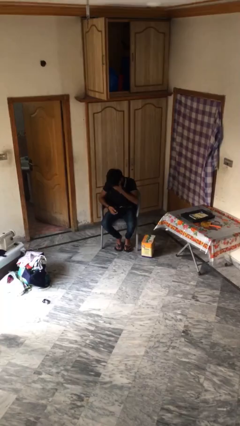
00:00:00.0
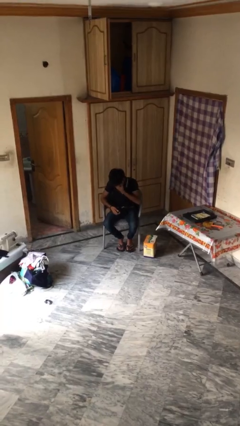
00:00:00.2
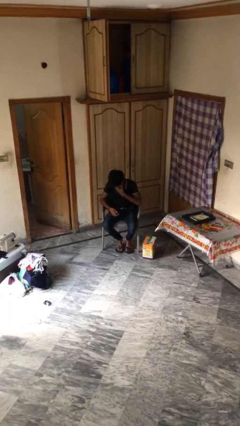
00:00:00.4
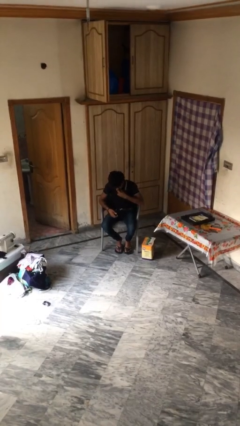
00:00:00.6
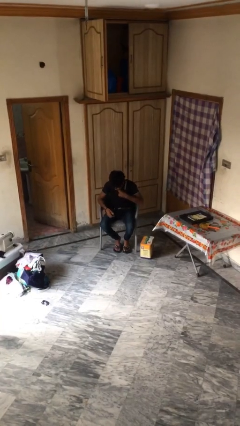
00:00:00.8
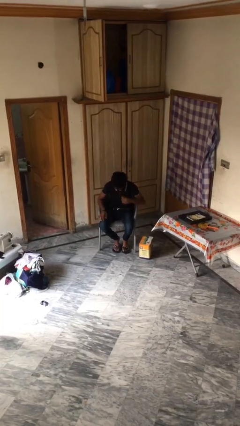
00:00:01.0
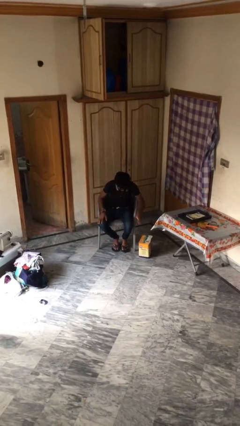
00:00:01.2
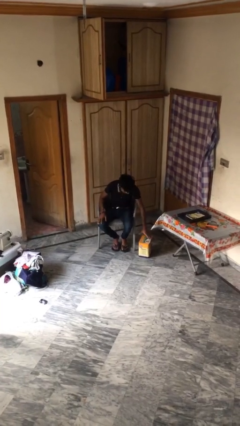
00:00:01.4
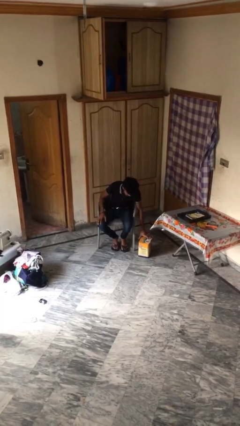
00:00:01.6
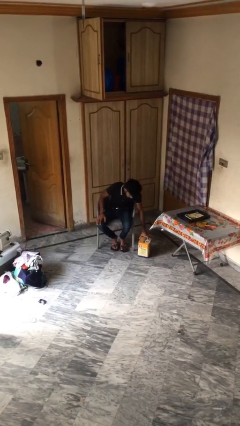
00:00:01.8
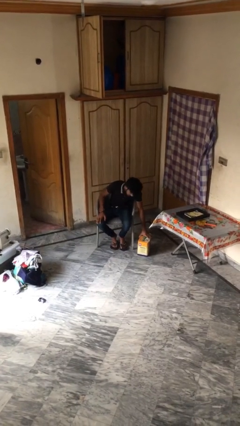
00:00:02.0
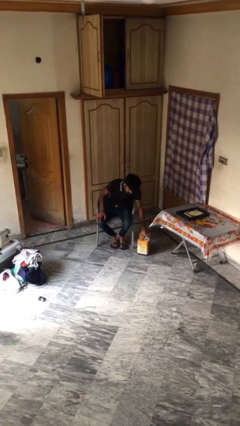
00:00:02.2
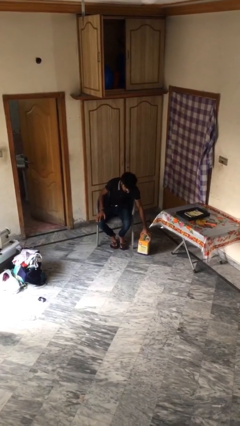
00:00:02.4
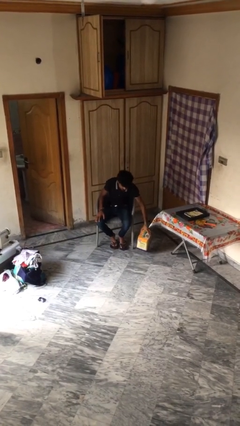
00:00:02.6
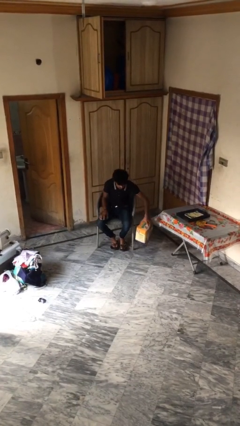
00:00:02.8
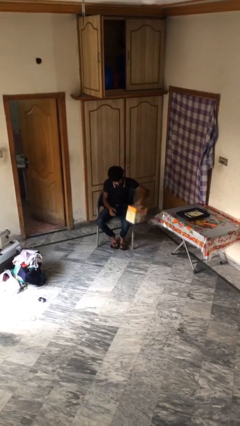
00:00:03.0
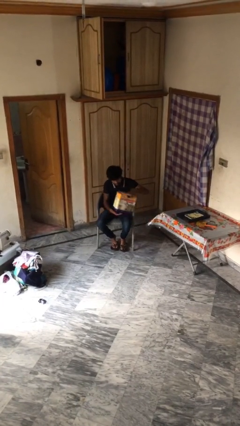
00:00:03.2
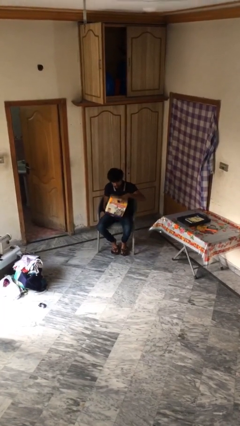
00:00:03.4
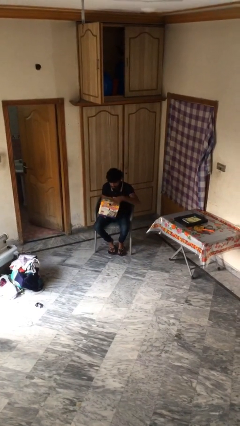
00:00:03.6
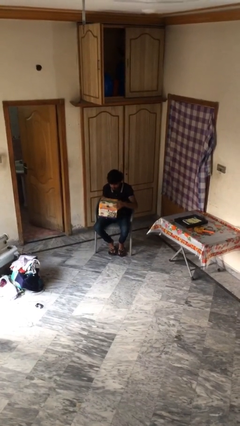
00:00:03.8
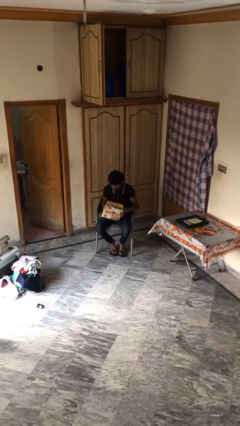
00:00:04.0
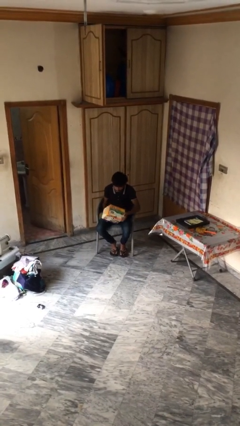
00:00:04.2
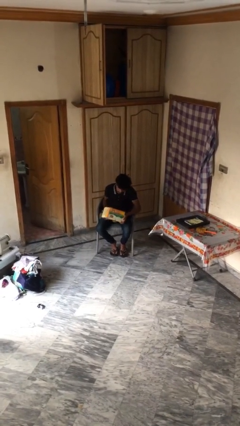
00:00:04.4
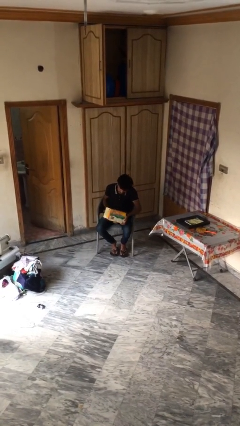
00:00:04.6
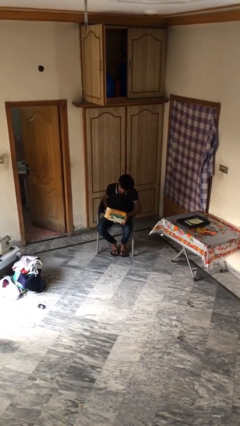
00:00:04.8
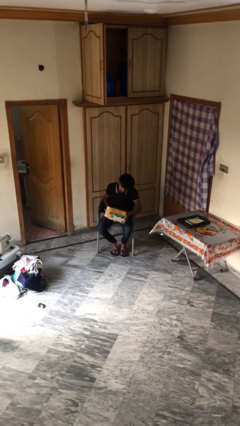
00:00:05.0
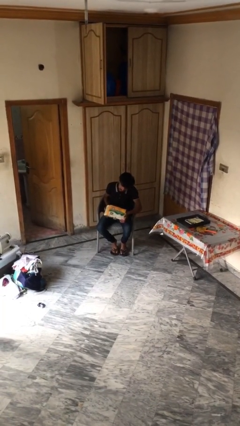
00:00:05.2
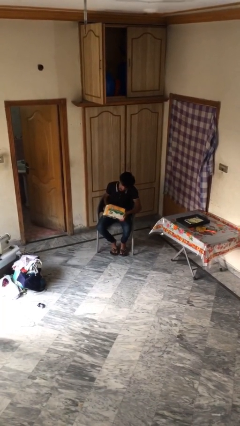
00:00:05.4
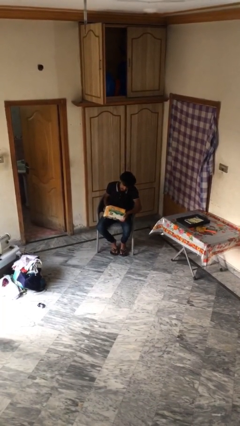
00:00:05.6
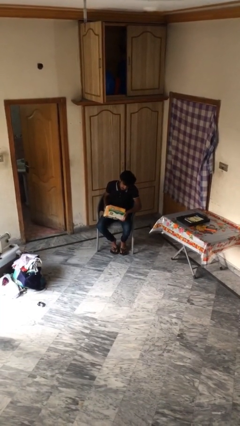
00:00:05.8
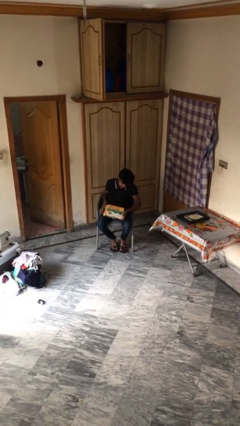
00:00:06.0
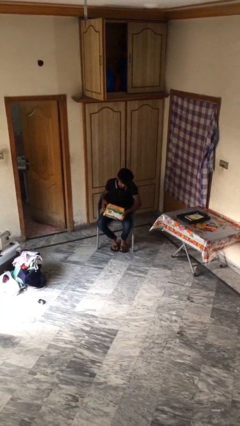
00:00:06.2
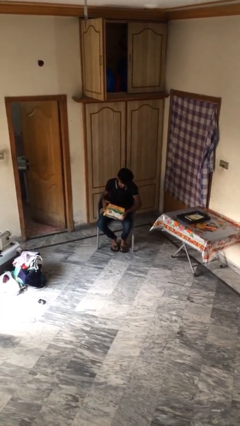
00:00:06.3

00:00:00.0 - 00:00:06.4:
person picks up object from floor

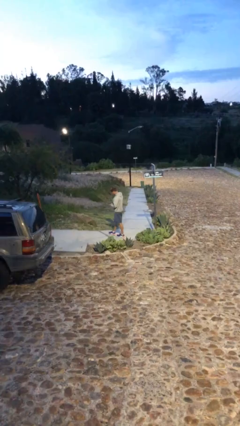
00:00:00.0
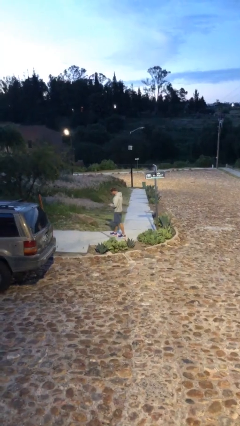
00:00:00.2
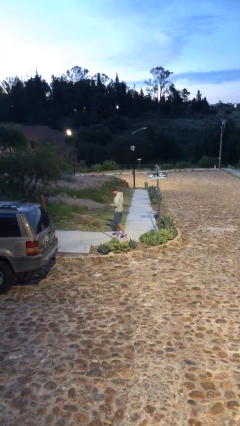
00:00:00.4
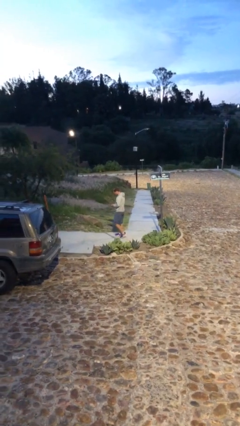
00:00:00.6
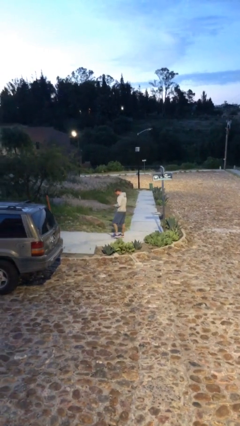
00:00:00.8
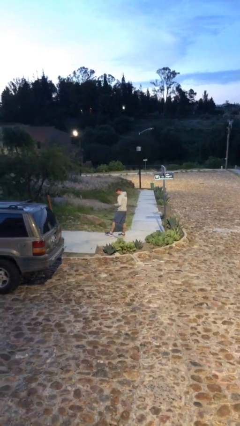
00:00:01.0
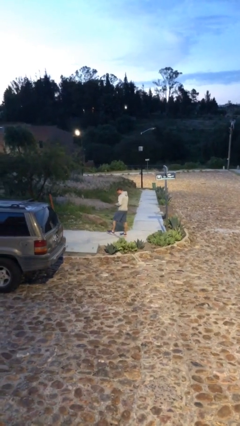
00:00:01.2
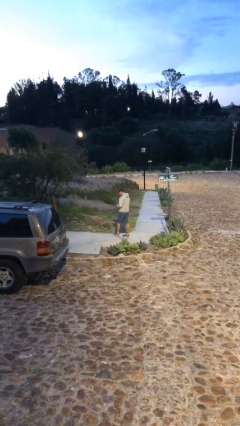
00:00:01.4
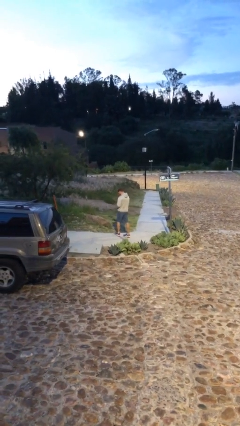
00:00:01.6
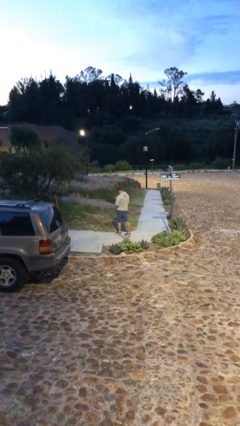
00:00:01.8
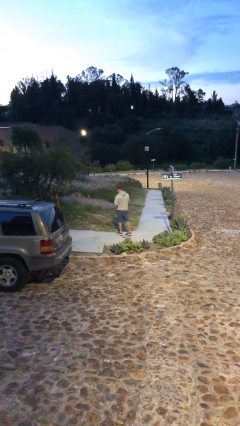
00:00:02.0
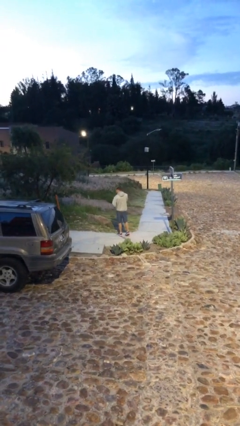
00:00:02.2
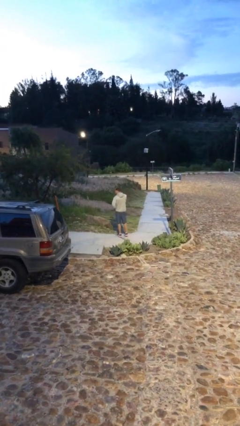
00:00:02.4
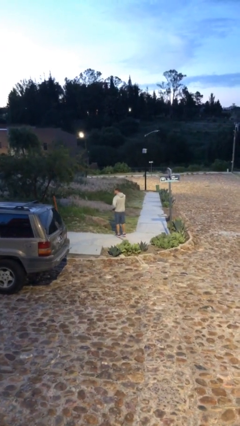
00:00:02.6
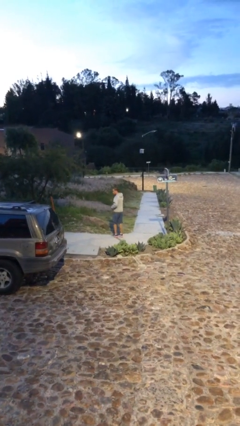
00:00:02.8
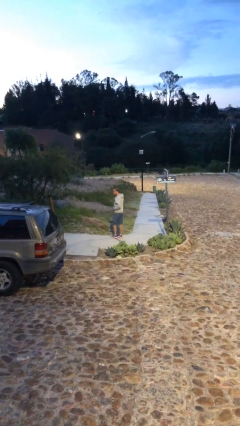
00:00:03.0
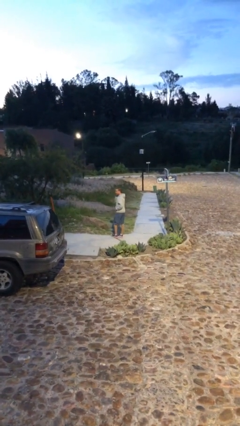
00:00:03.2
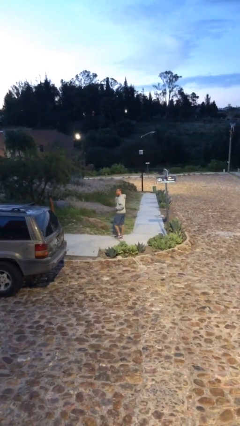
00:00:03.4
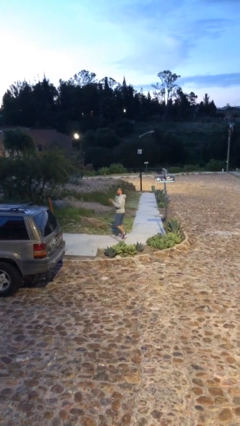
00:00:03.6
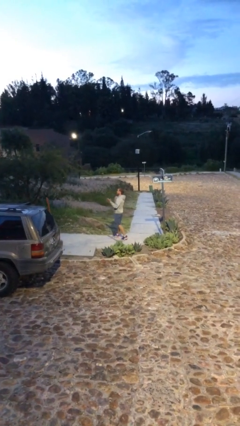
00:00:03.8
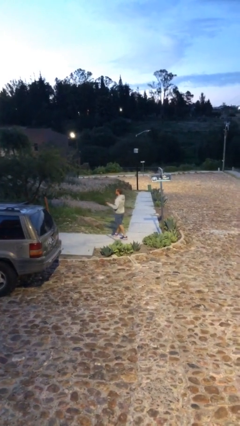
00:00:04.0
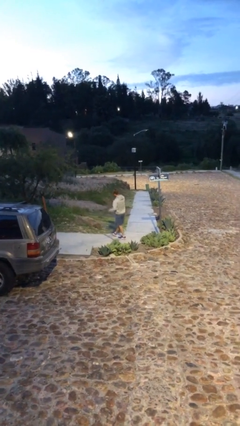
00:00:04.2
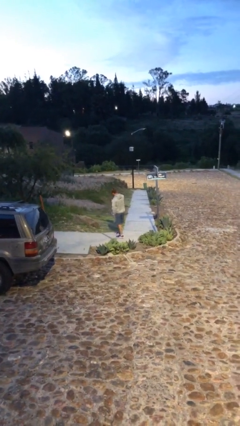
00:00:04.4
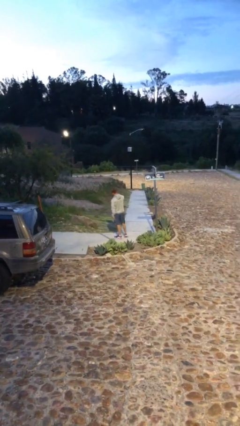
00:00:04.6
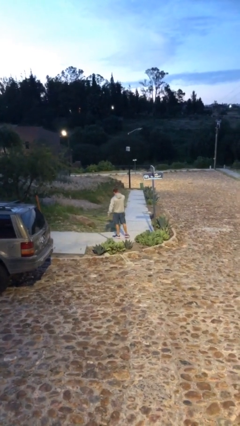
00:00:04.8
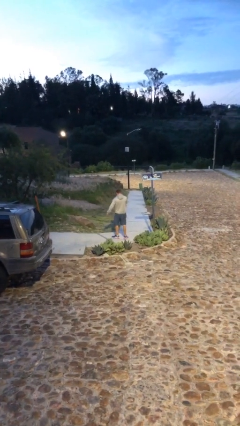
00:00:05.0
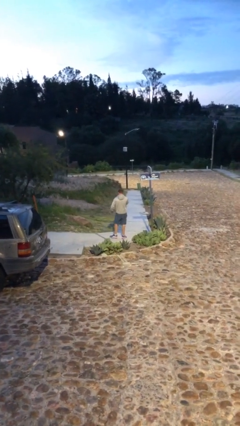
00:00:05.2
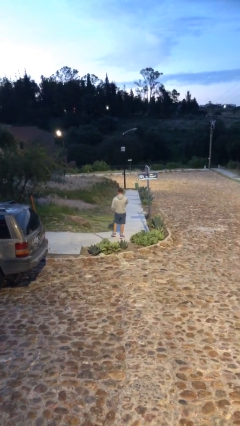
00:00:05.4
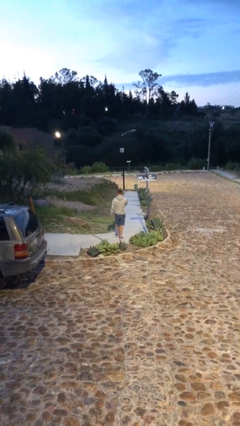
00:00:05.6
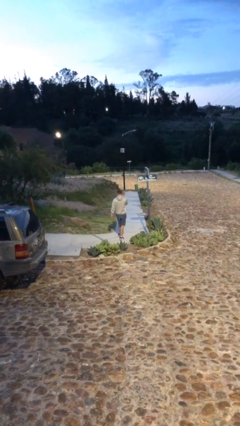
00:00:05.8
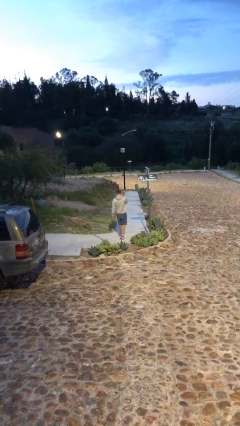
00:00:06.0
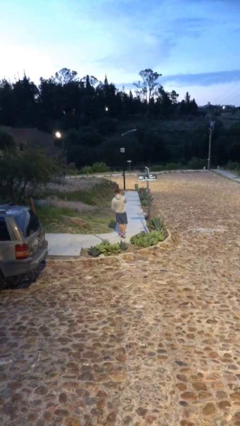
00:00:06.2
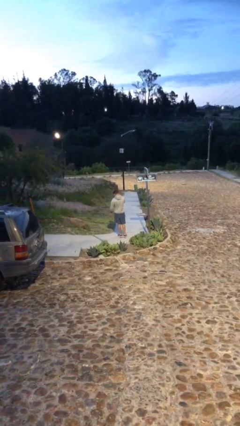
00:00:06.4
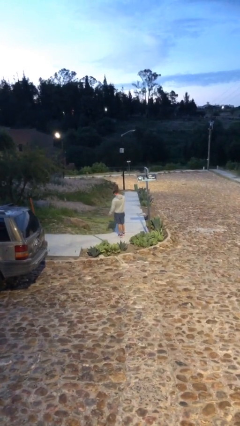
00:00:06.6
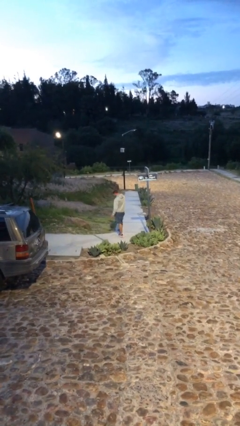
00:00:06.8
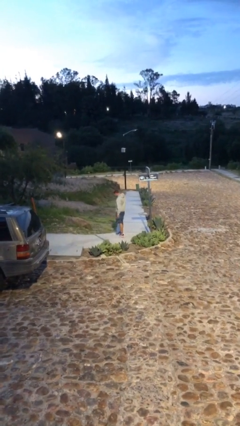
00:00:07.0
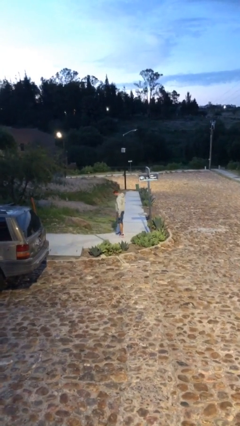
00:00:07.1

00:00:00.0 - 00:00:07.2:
person talks on phone

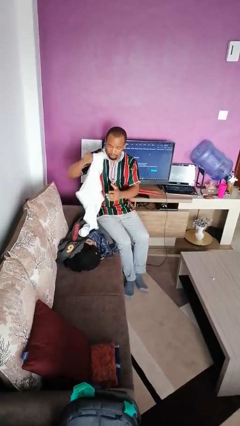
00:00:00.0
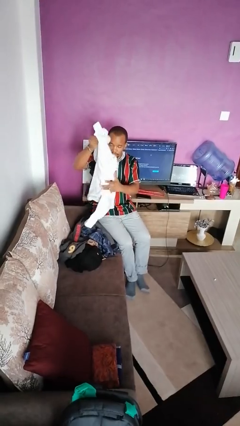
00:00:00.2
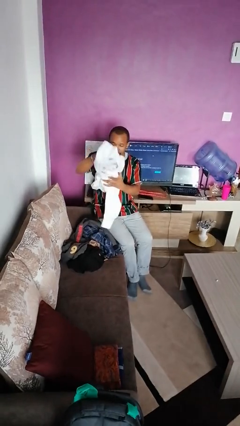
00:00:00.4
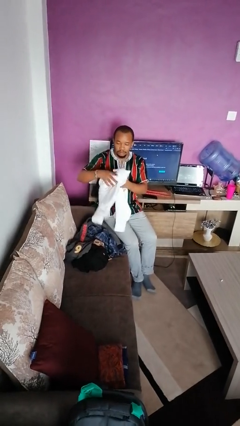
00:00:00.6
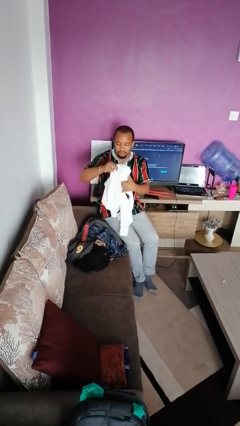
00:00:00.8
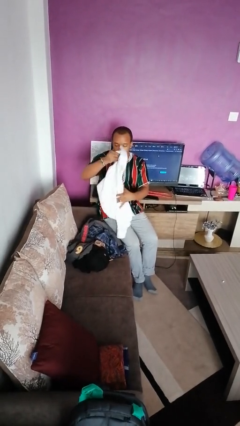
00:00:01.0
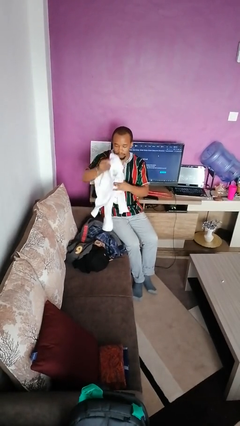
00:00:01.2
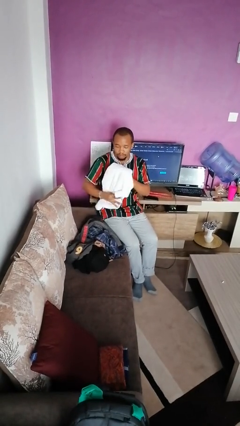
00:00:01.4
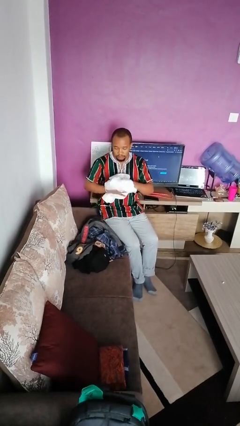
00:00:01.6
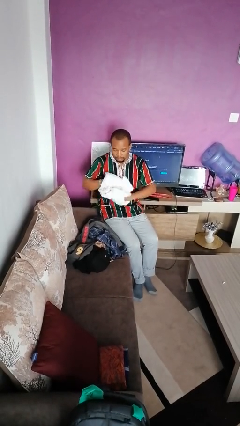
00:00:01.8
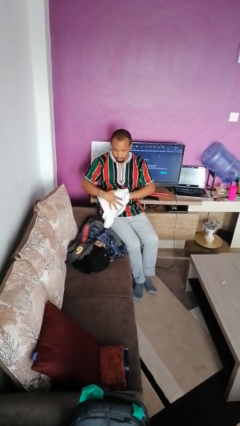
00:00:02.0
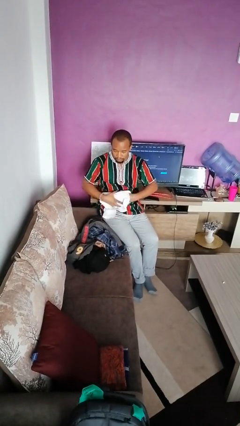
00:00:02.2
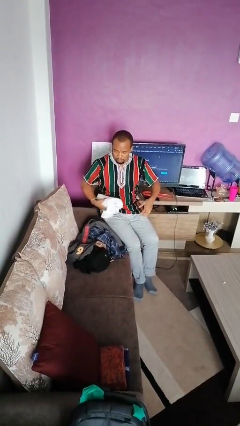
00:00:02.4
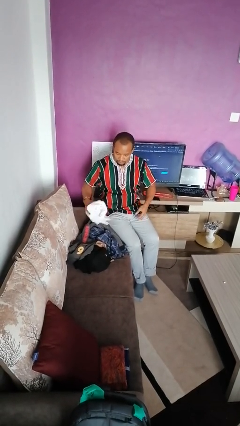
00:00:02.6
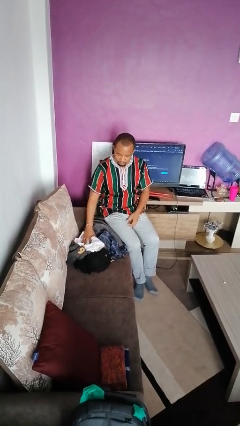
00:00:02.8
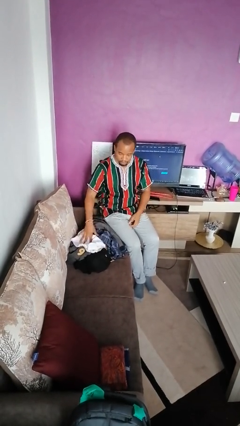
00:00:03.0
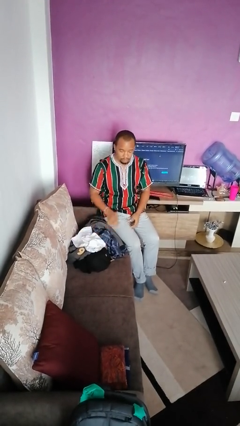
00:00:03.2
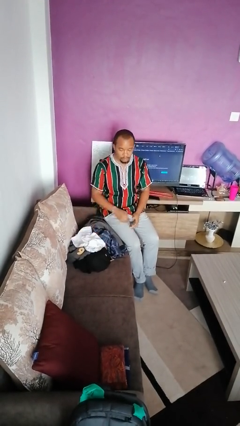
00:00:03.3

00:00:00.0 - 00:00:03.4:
person folds shirt

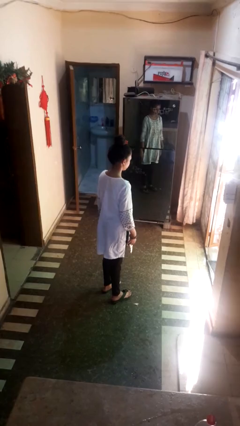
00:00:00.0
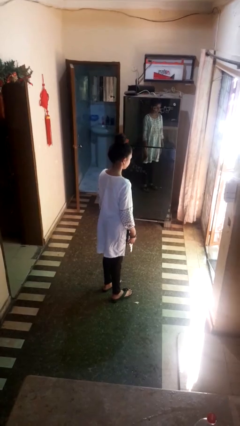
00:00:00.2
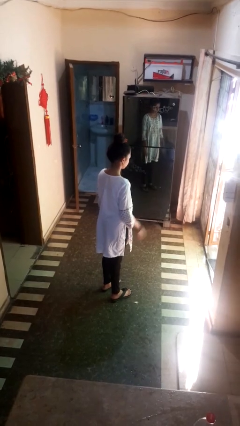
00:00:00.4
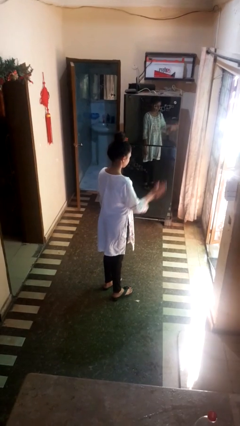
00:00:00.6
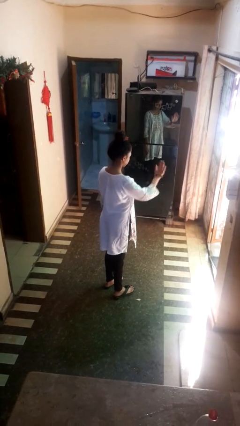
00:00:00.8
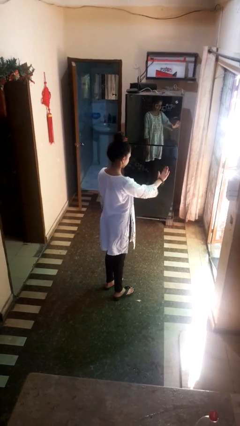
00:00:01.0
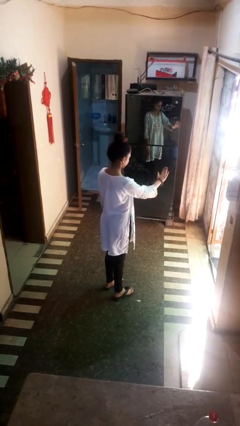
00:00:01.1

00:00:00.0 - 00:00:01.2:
person gestures stop
